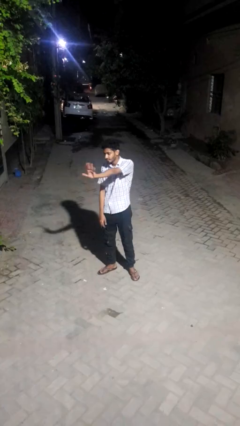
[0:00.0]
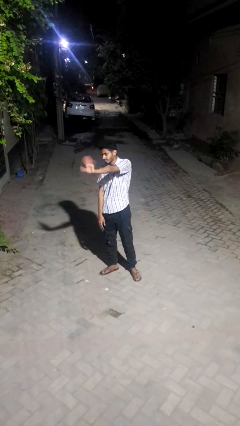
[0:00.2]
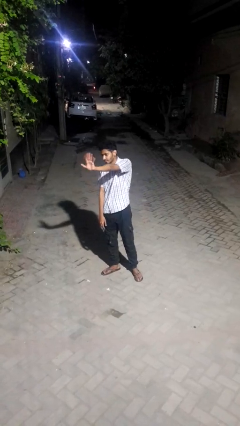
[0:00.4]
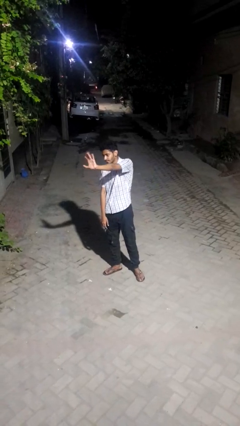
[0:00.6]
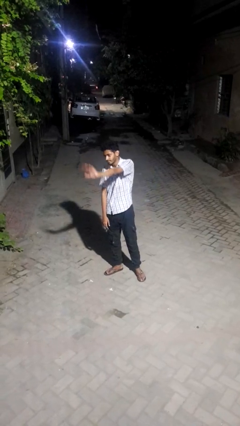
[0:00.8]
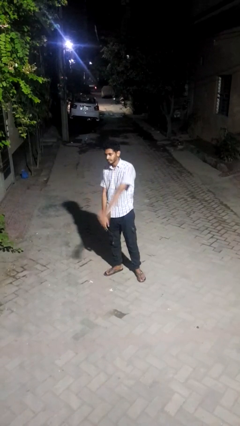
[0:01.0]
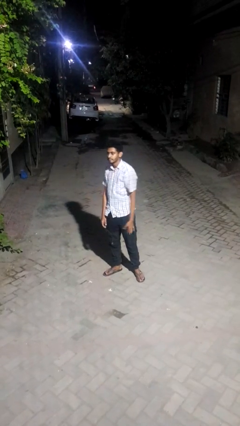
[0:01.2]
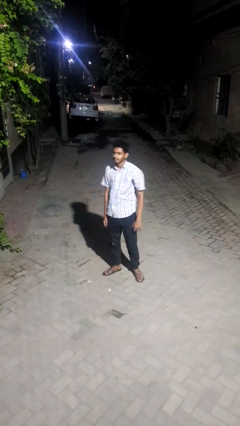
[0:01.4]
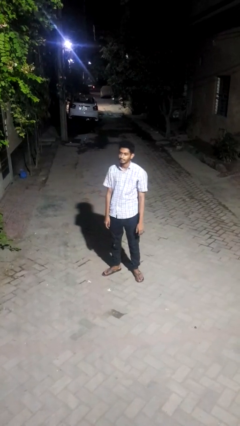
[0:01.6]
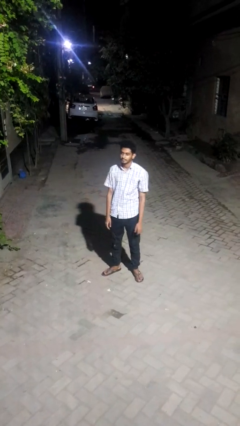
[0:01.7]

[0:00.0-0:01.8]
person waves at person

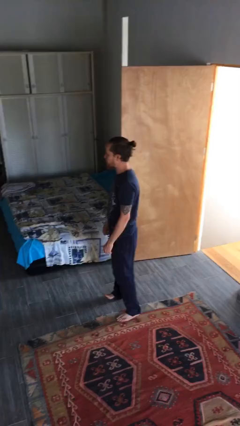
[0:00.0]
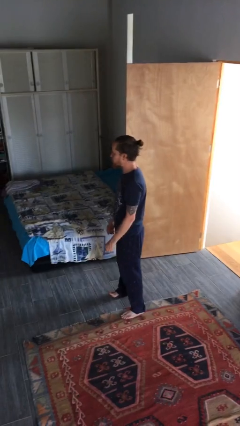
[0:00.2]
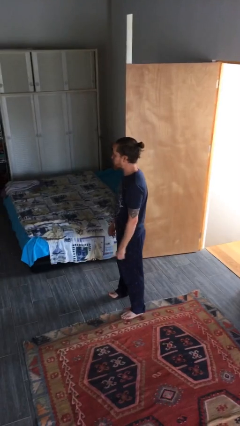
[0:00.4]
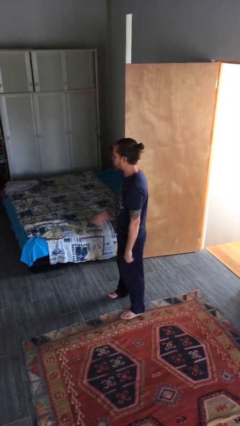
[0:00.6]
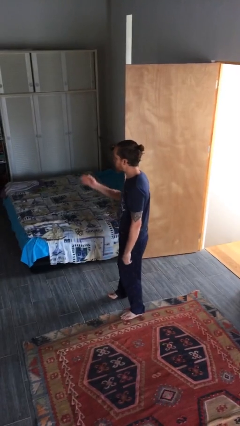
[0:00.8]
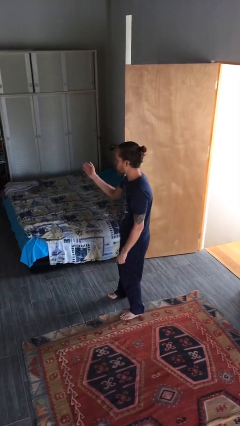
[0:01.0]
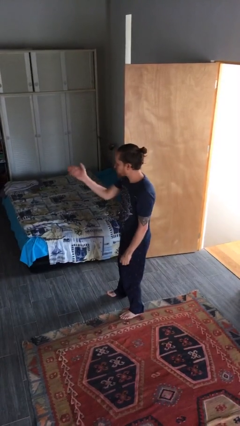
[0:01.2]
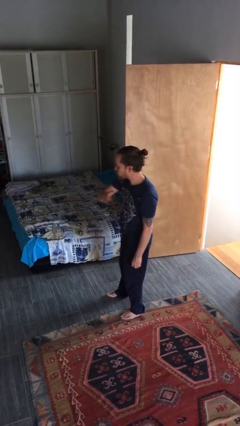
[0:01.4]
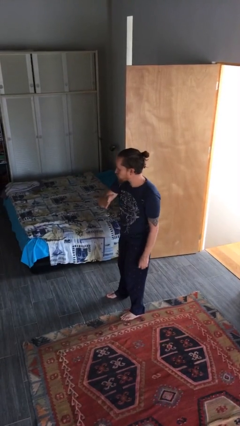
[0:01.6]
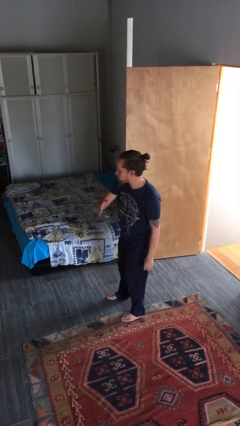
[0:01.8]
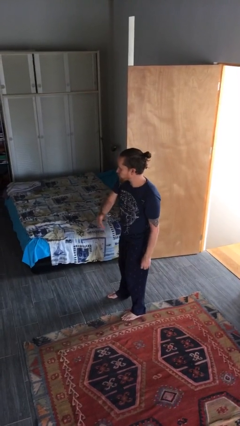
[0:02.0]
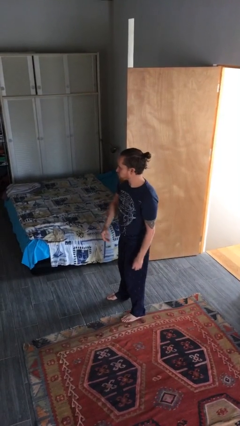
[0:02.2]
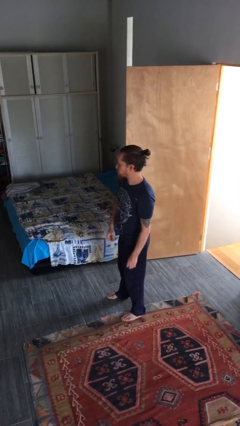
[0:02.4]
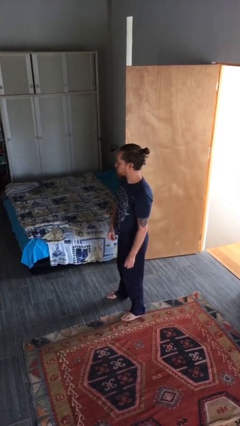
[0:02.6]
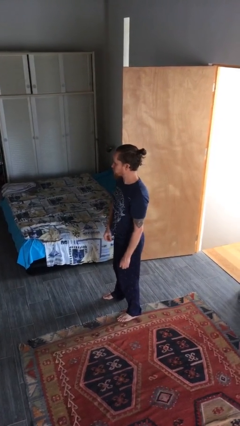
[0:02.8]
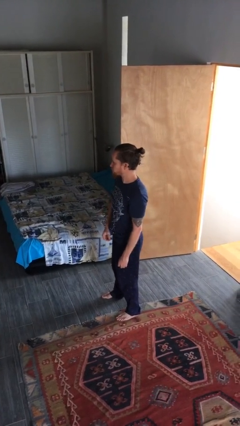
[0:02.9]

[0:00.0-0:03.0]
person gestures swipe left

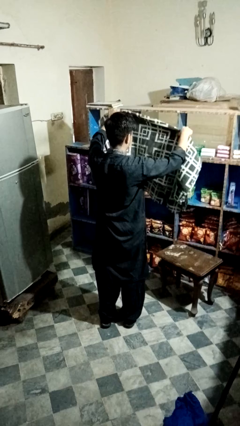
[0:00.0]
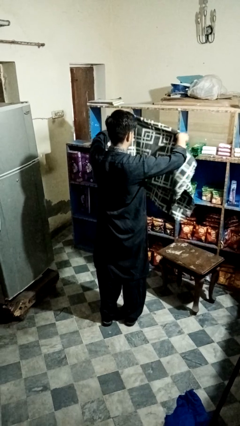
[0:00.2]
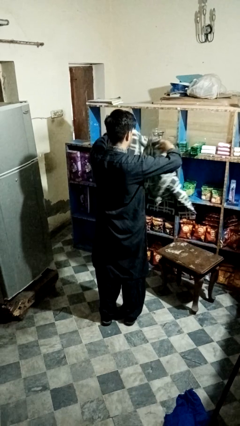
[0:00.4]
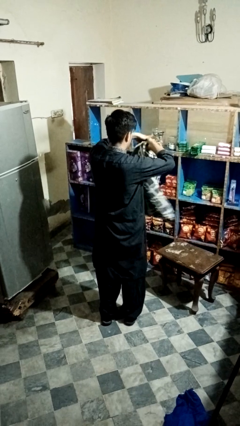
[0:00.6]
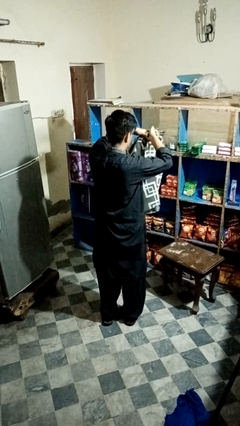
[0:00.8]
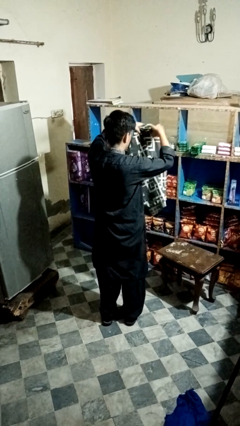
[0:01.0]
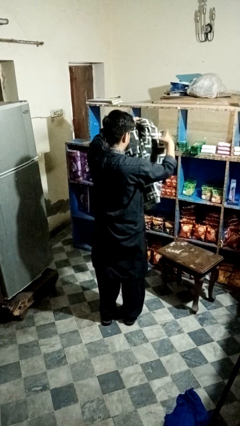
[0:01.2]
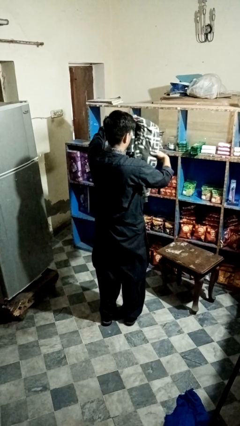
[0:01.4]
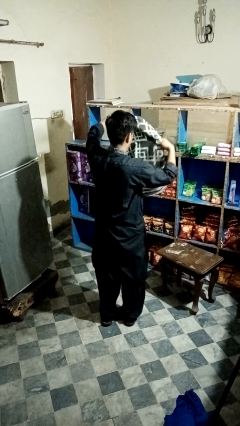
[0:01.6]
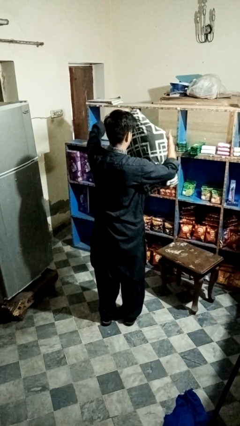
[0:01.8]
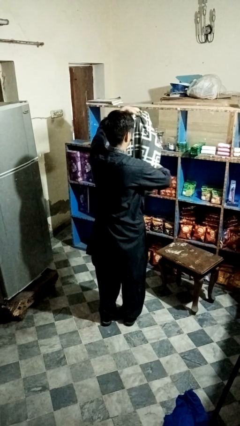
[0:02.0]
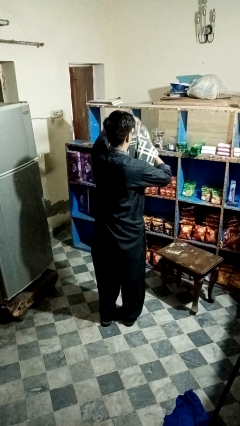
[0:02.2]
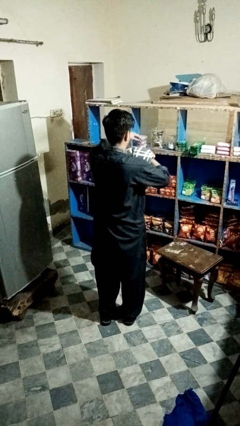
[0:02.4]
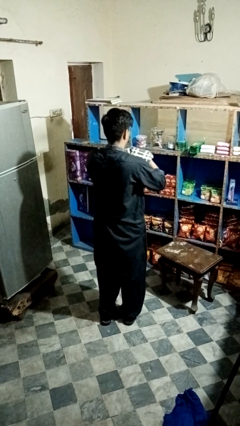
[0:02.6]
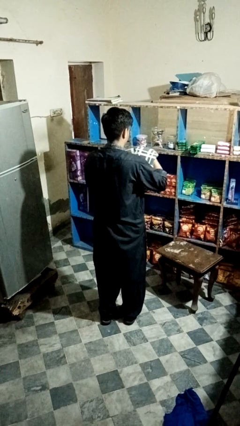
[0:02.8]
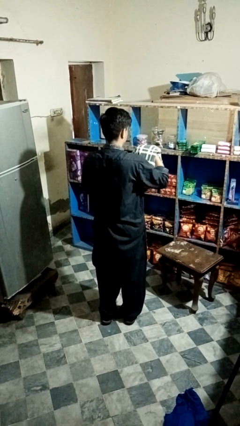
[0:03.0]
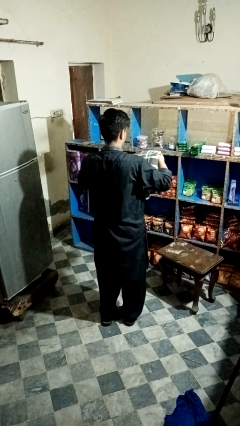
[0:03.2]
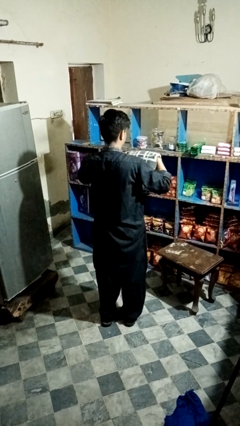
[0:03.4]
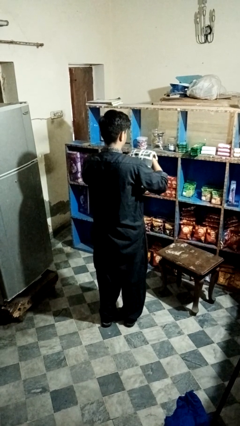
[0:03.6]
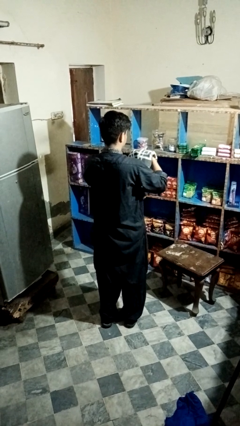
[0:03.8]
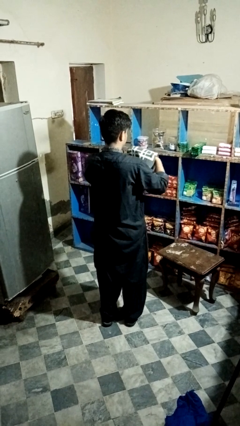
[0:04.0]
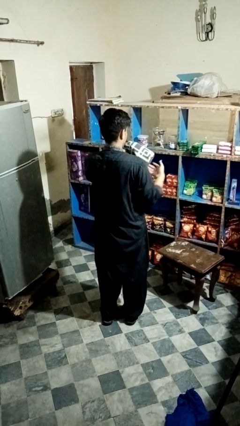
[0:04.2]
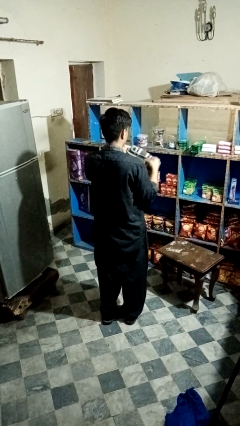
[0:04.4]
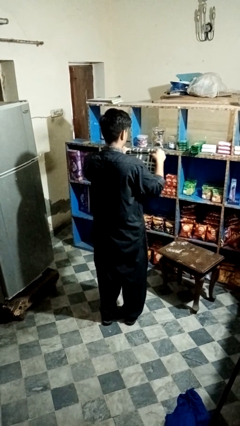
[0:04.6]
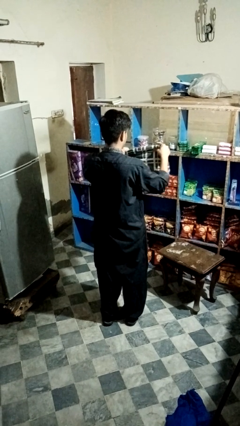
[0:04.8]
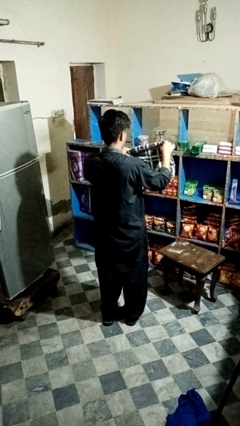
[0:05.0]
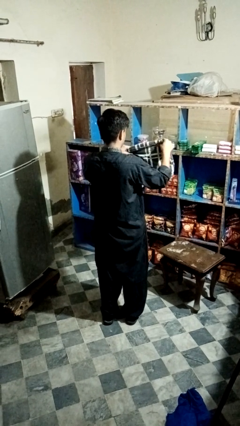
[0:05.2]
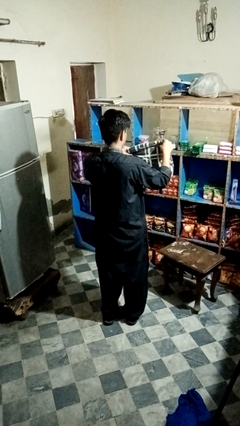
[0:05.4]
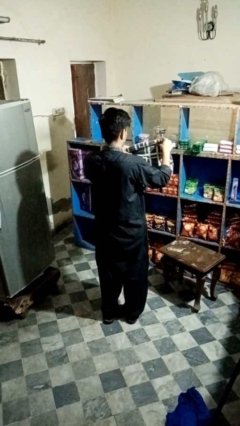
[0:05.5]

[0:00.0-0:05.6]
person folds blanket

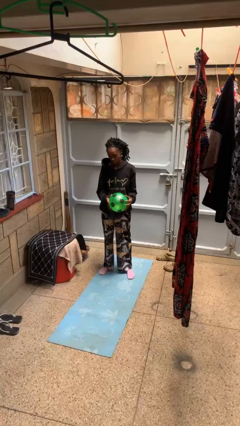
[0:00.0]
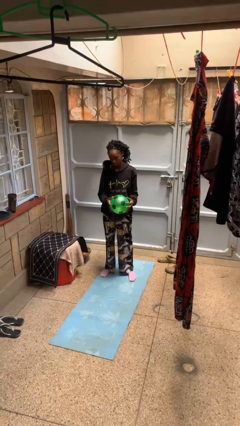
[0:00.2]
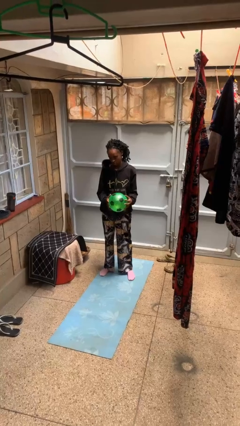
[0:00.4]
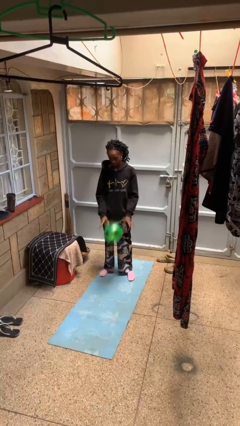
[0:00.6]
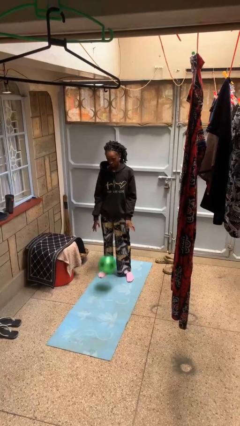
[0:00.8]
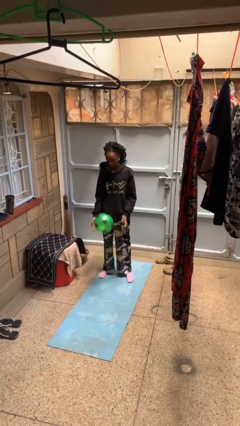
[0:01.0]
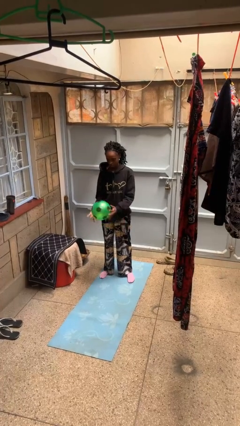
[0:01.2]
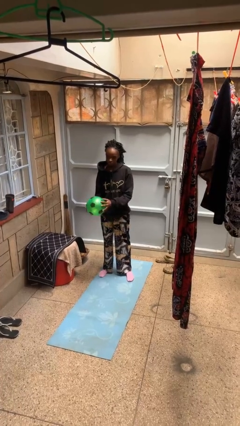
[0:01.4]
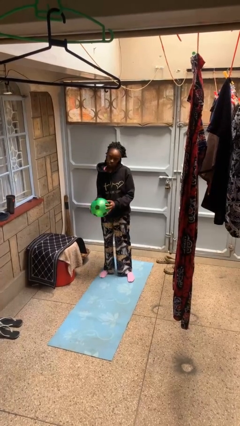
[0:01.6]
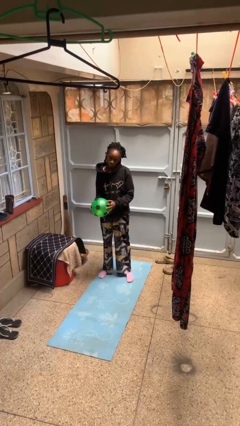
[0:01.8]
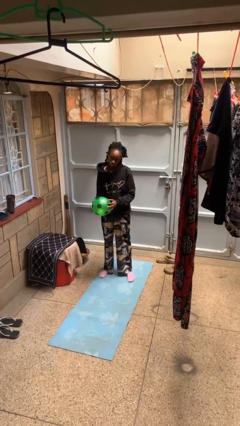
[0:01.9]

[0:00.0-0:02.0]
person bounces ball on floor

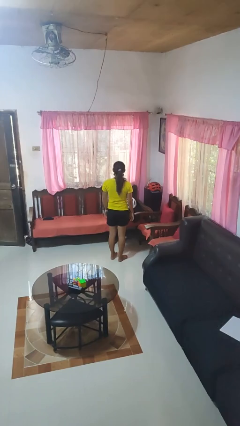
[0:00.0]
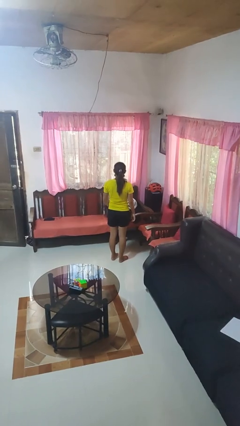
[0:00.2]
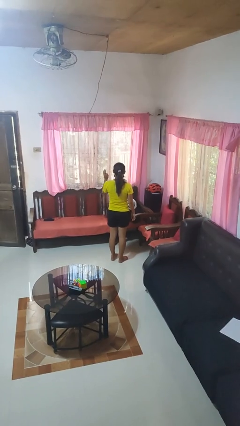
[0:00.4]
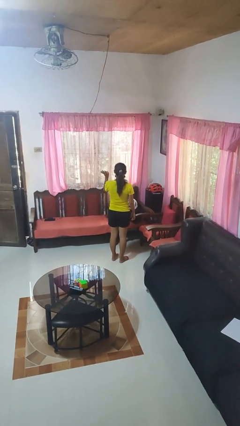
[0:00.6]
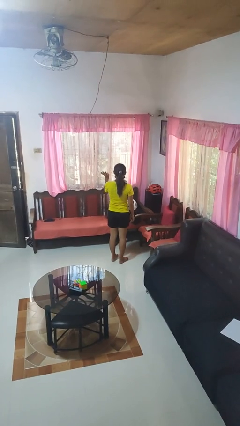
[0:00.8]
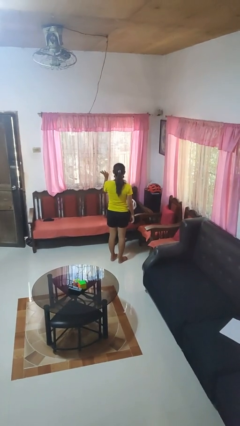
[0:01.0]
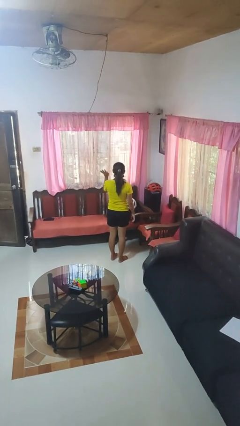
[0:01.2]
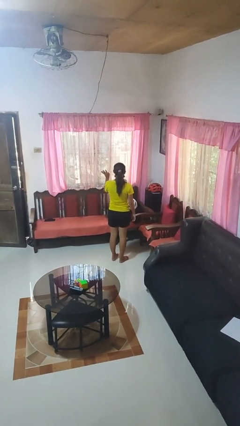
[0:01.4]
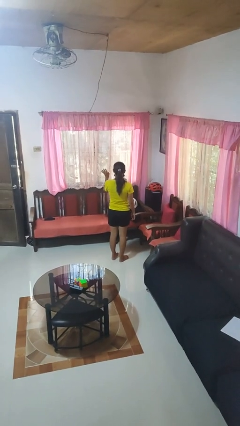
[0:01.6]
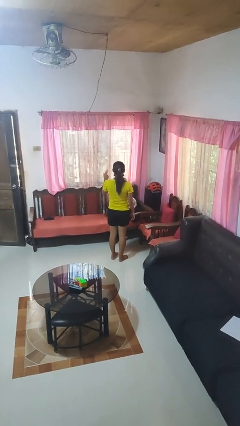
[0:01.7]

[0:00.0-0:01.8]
person gestures number four

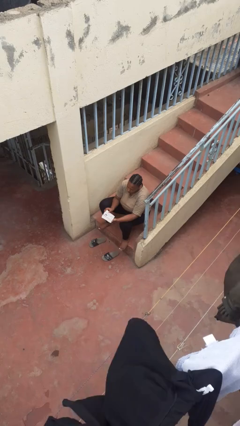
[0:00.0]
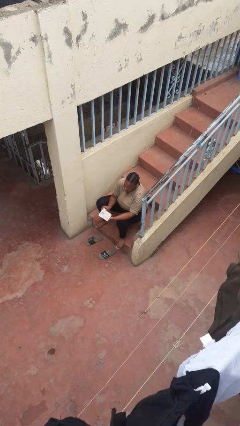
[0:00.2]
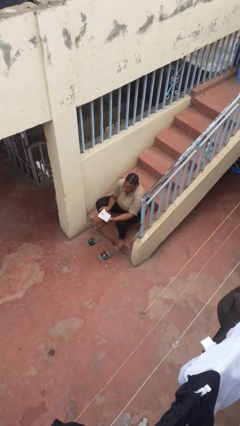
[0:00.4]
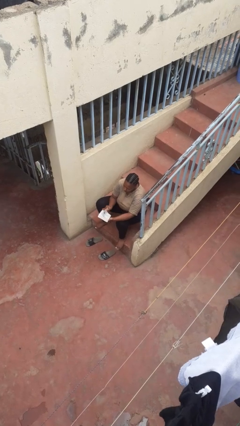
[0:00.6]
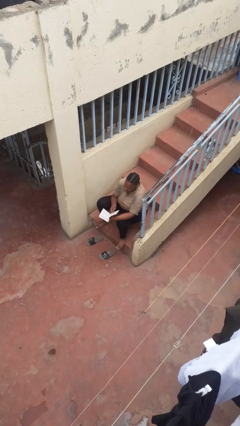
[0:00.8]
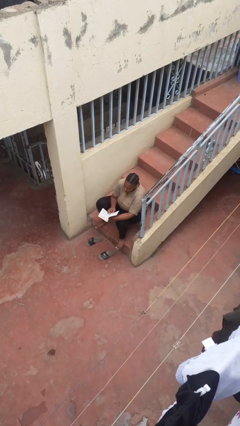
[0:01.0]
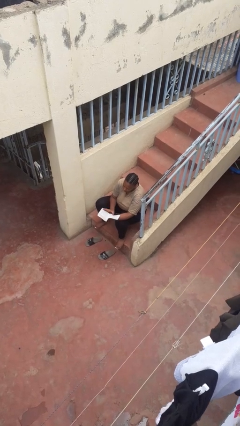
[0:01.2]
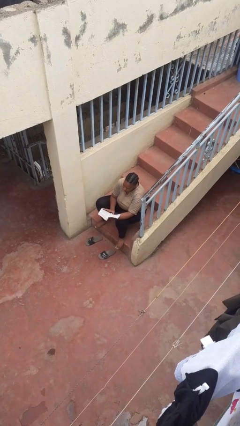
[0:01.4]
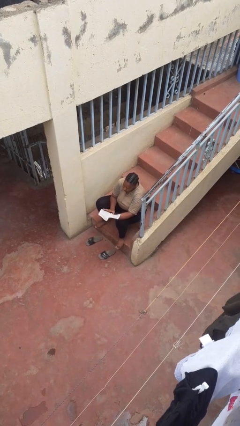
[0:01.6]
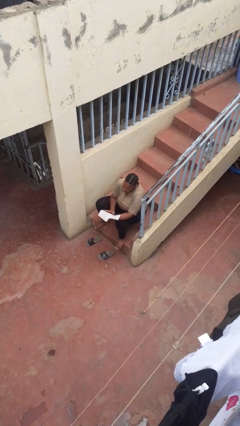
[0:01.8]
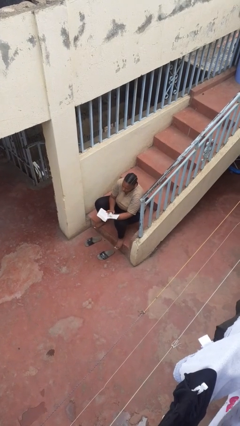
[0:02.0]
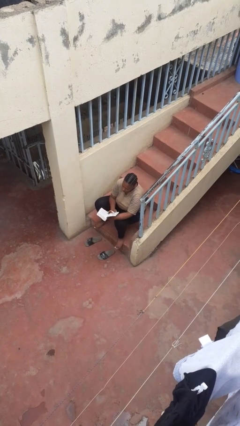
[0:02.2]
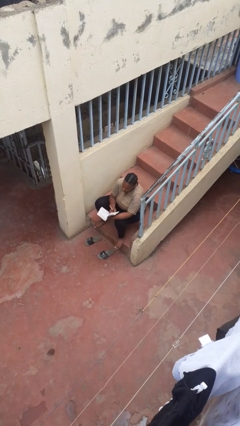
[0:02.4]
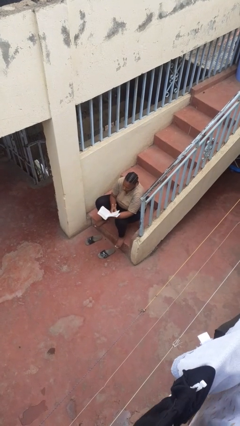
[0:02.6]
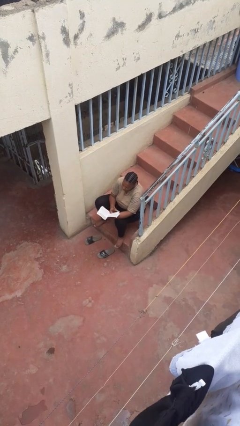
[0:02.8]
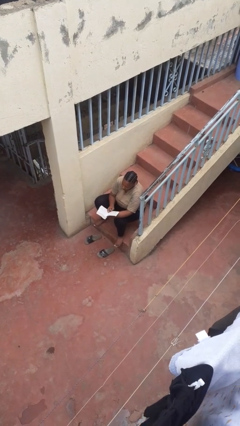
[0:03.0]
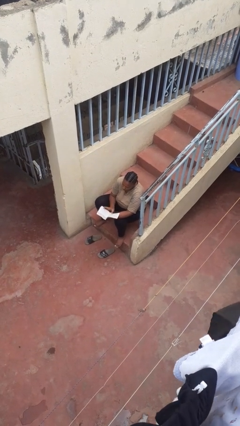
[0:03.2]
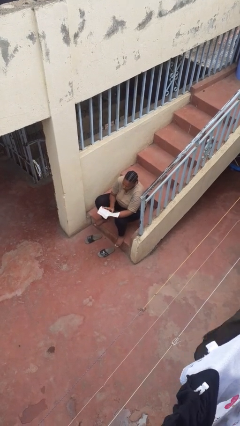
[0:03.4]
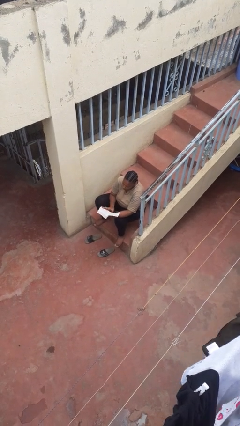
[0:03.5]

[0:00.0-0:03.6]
person reads book
